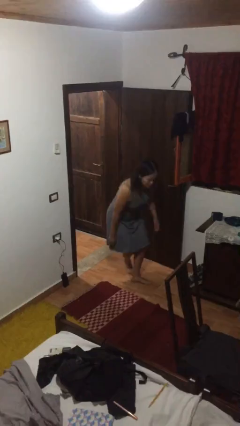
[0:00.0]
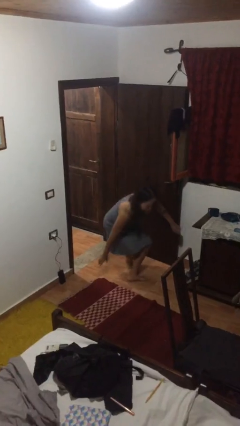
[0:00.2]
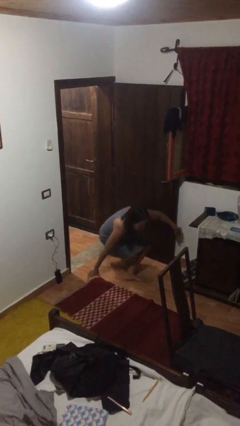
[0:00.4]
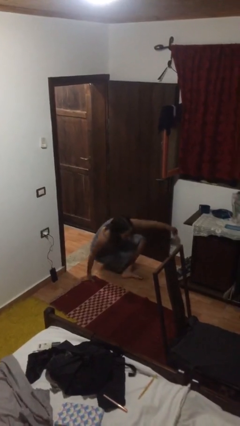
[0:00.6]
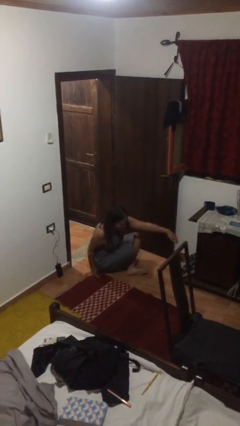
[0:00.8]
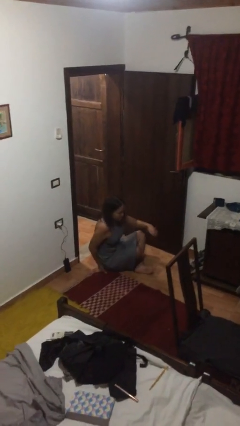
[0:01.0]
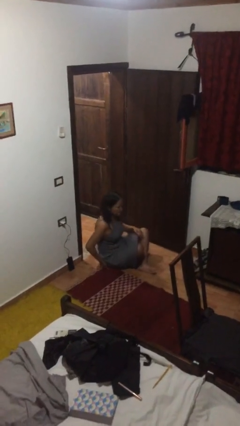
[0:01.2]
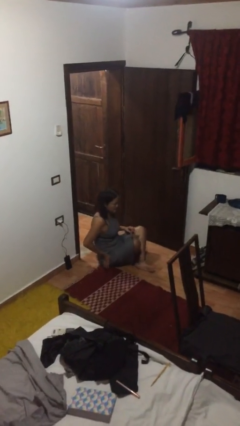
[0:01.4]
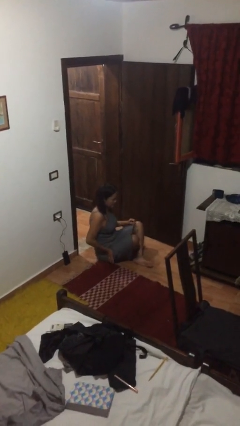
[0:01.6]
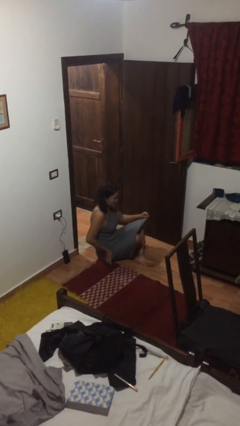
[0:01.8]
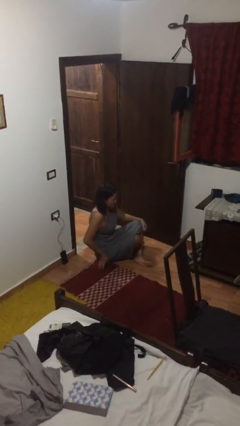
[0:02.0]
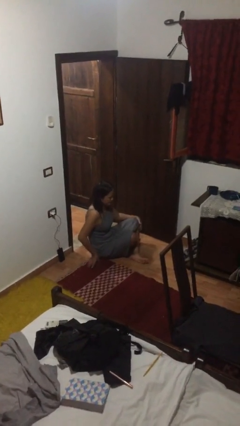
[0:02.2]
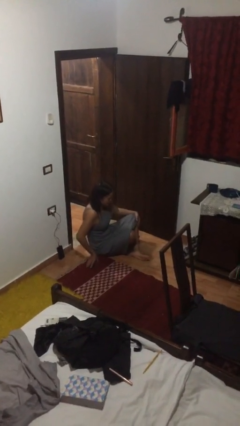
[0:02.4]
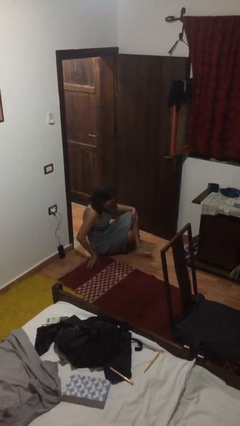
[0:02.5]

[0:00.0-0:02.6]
person sits crisscross

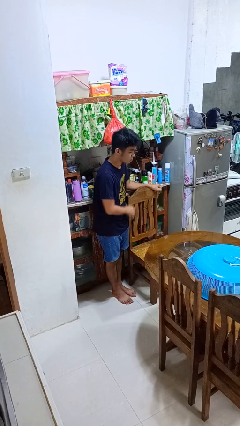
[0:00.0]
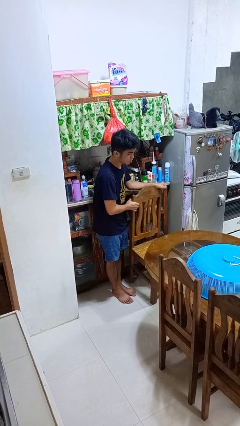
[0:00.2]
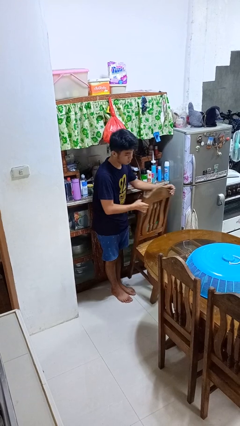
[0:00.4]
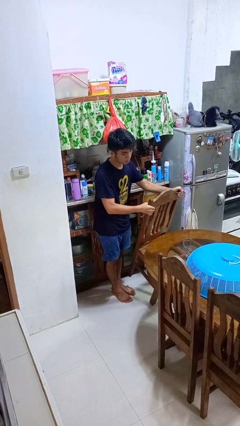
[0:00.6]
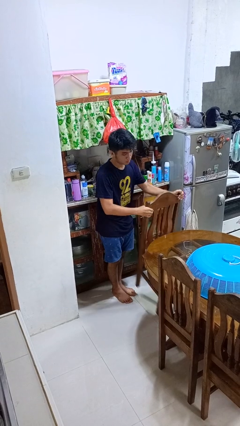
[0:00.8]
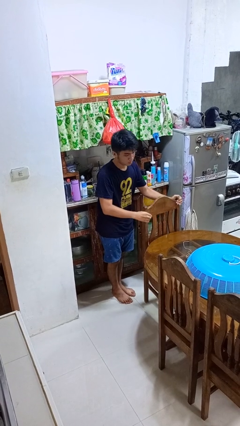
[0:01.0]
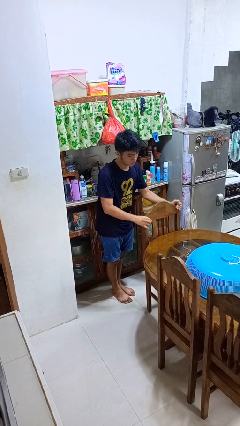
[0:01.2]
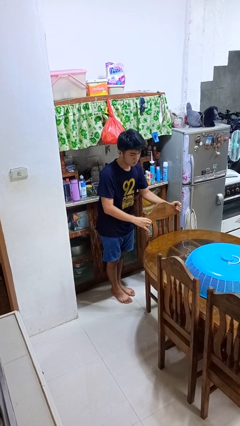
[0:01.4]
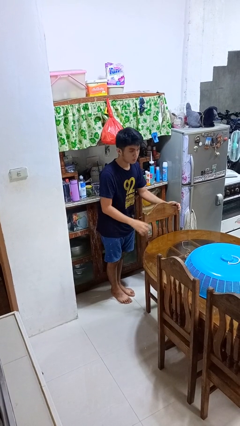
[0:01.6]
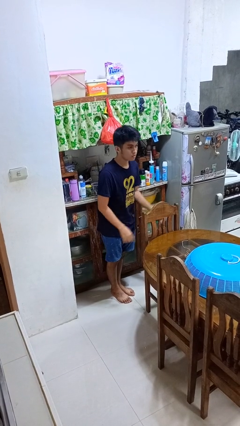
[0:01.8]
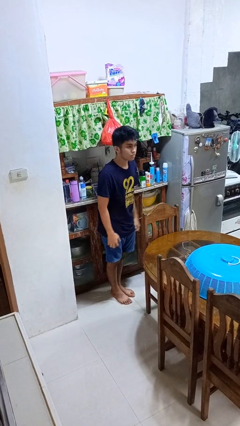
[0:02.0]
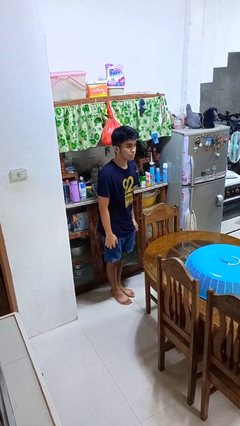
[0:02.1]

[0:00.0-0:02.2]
person pushes in chair

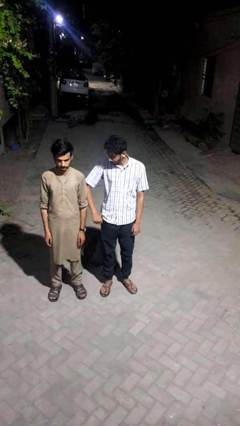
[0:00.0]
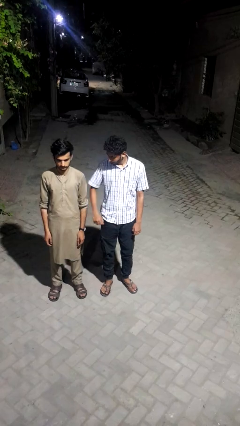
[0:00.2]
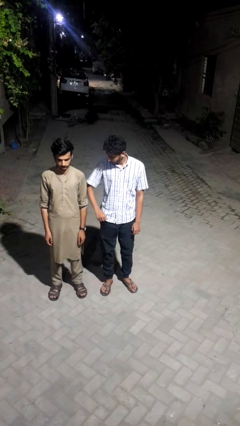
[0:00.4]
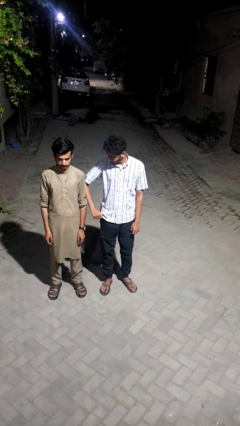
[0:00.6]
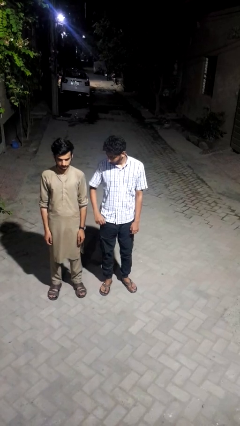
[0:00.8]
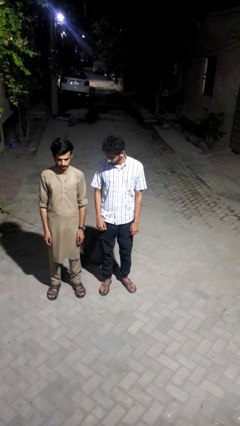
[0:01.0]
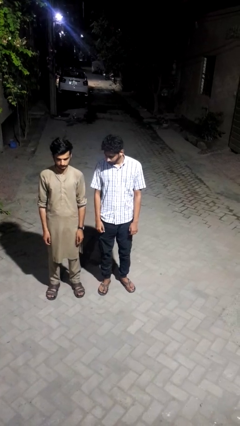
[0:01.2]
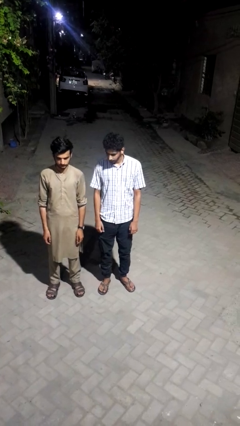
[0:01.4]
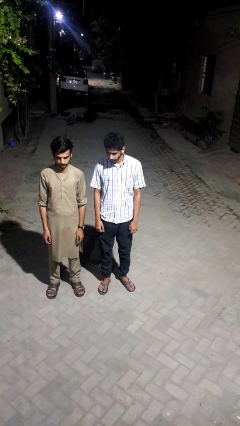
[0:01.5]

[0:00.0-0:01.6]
person nudges person with elbow

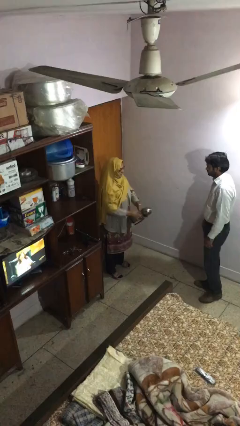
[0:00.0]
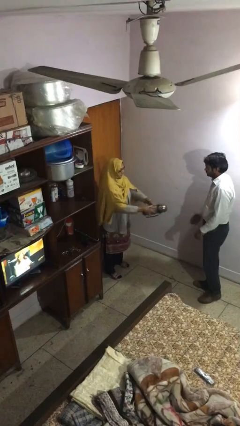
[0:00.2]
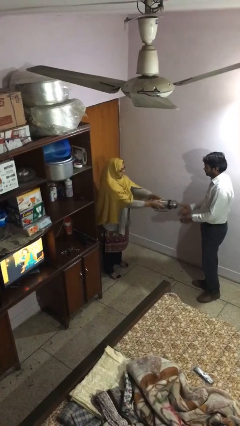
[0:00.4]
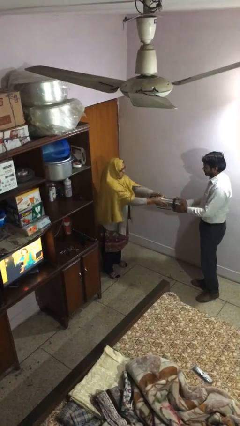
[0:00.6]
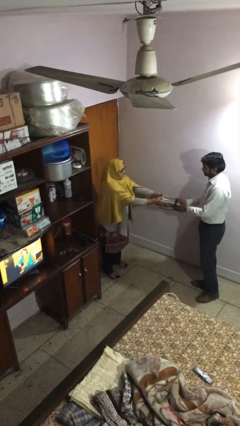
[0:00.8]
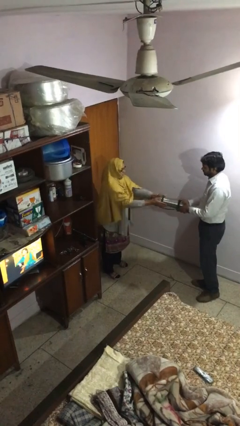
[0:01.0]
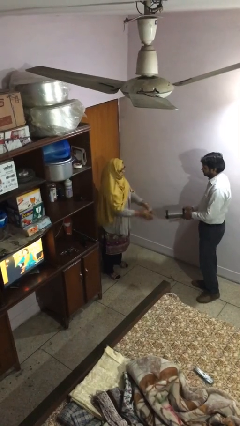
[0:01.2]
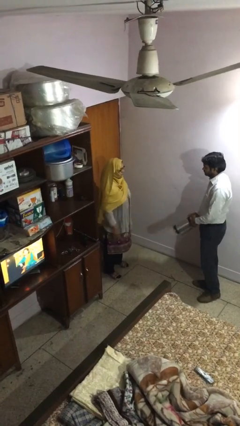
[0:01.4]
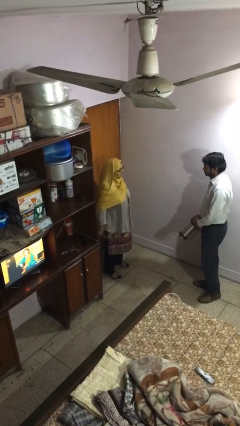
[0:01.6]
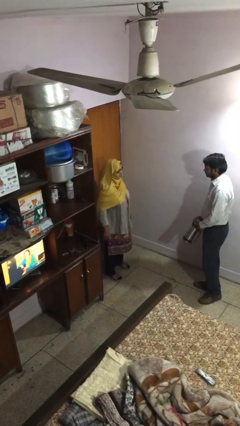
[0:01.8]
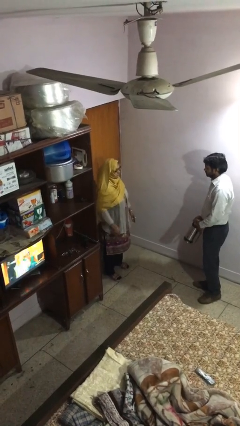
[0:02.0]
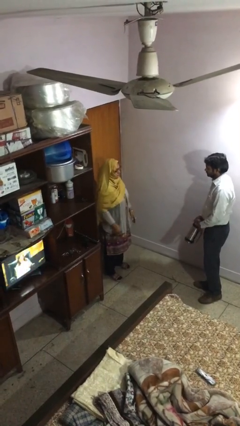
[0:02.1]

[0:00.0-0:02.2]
person transfers object to person

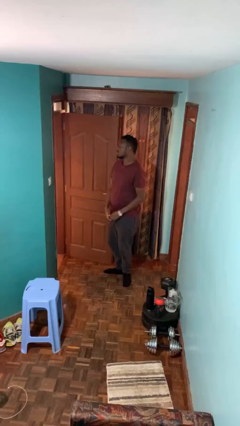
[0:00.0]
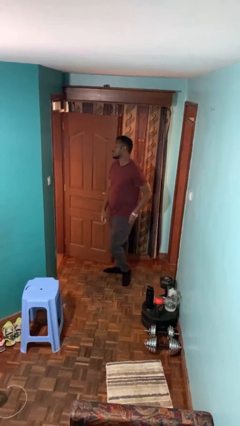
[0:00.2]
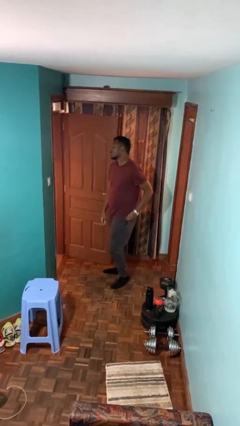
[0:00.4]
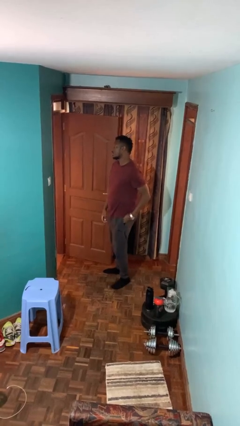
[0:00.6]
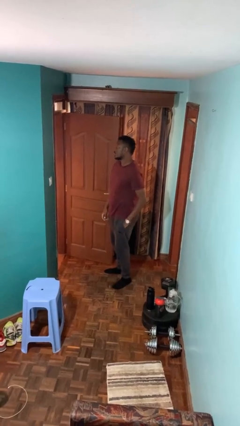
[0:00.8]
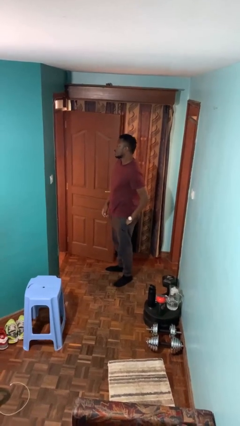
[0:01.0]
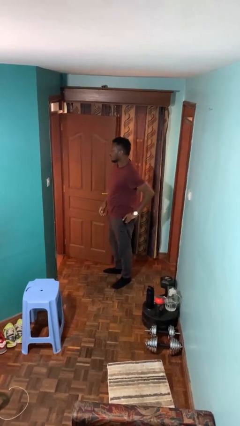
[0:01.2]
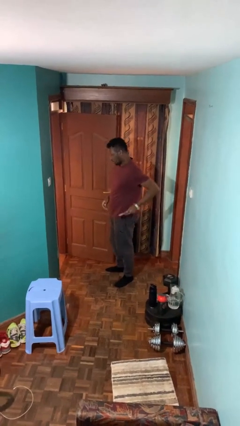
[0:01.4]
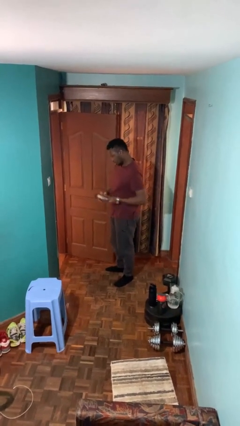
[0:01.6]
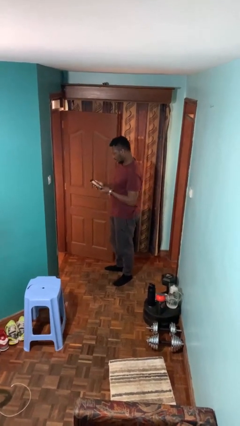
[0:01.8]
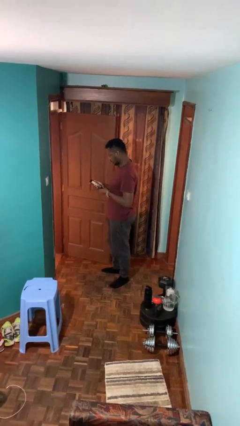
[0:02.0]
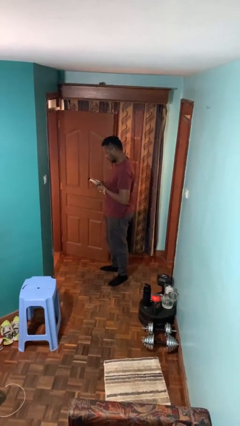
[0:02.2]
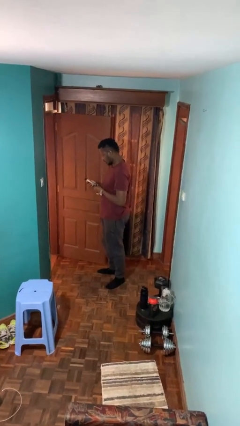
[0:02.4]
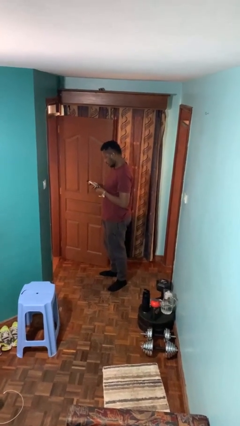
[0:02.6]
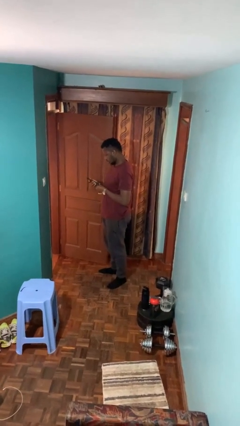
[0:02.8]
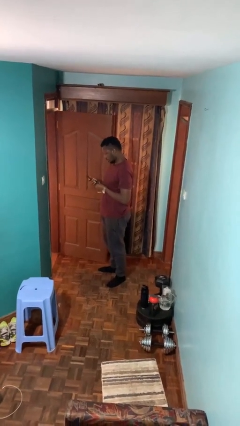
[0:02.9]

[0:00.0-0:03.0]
person takes phone from pocket

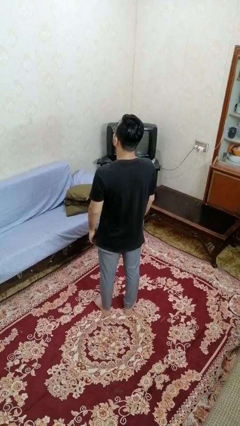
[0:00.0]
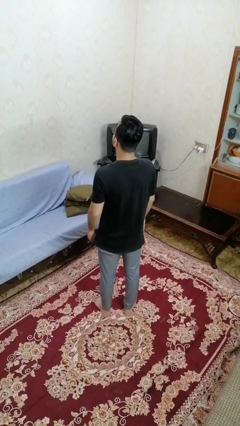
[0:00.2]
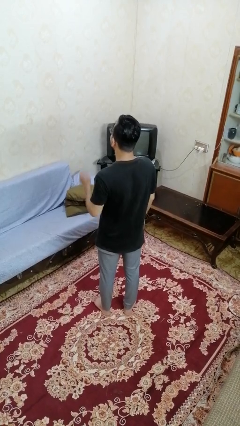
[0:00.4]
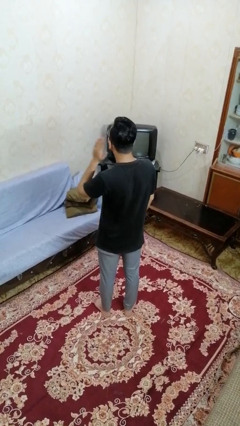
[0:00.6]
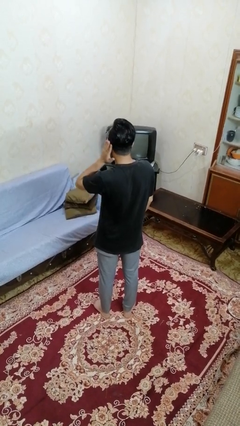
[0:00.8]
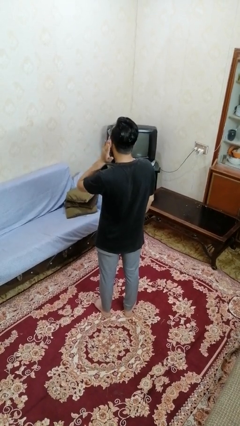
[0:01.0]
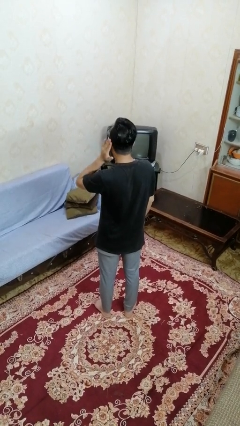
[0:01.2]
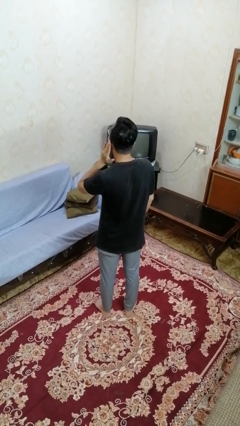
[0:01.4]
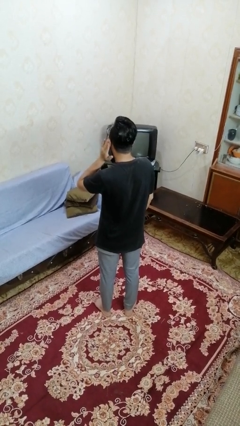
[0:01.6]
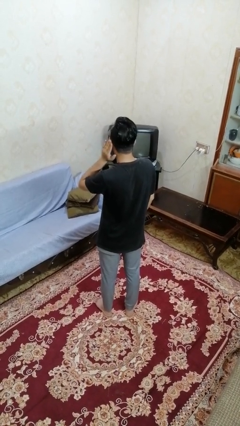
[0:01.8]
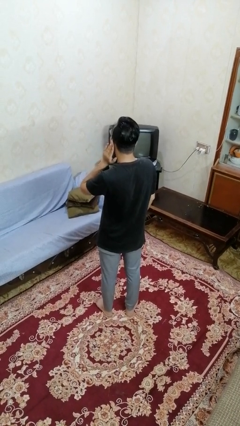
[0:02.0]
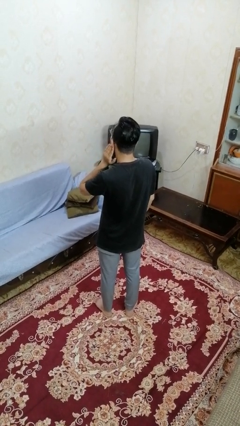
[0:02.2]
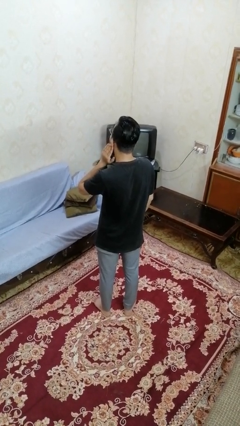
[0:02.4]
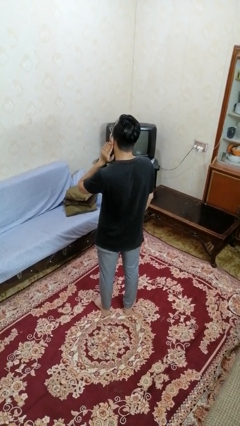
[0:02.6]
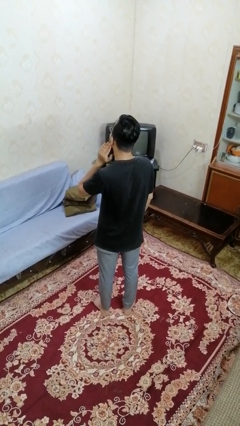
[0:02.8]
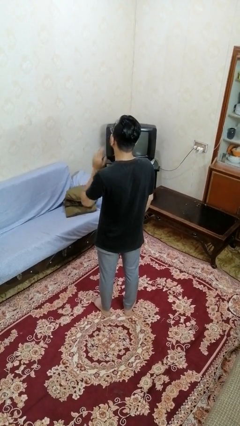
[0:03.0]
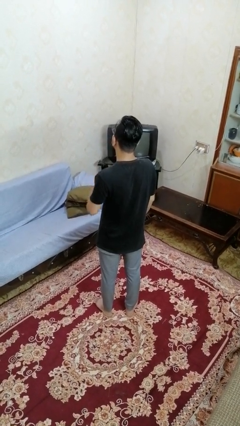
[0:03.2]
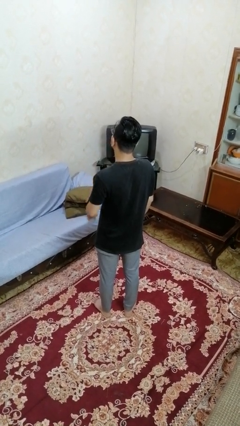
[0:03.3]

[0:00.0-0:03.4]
person touches earlobe

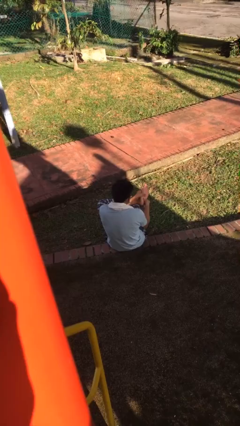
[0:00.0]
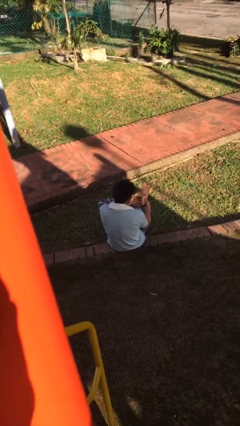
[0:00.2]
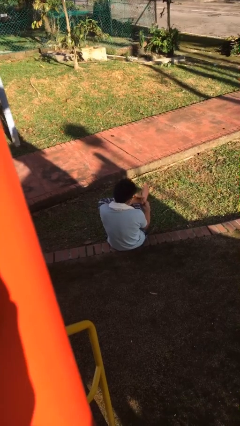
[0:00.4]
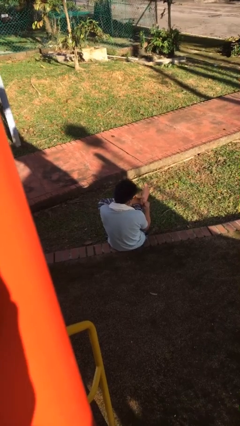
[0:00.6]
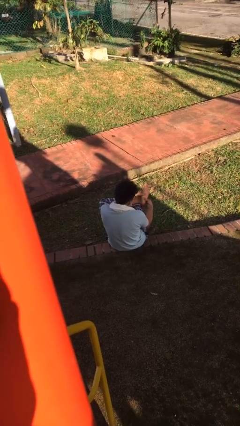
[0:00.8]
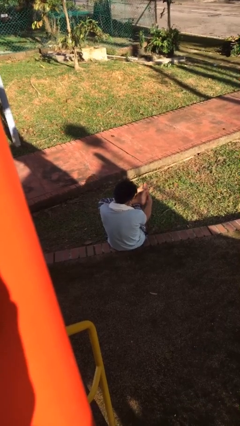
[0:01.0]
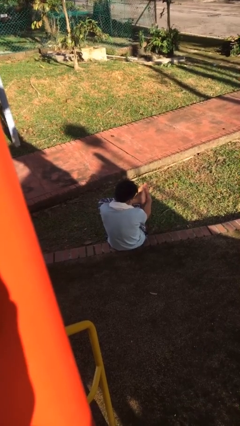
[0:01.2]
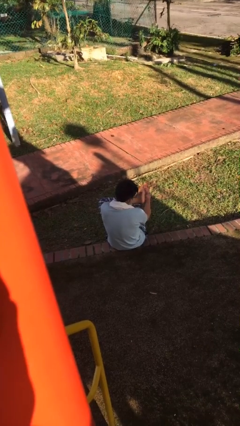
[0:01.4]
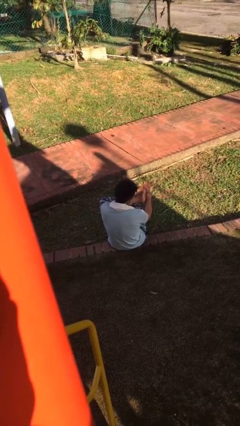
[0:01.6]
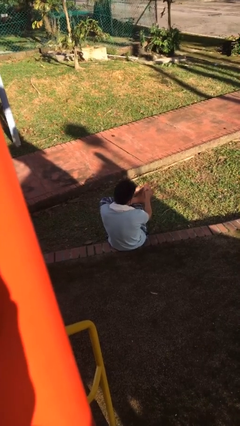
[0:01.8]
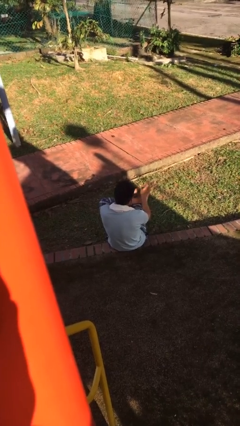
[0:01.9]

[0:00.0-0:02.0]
person rubs foot
